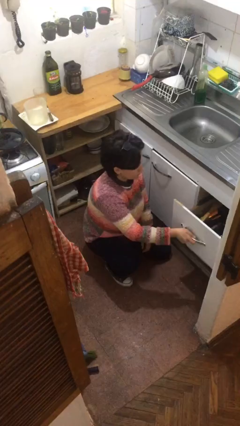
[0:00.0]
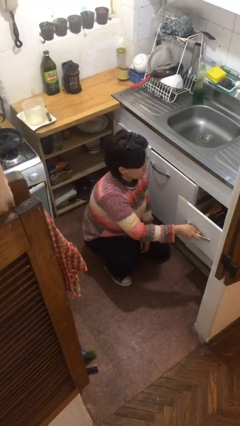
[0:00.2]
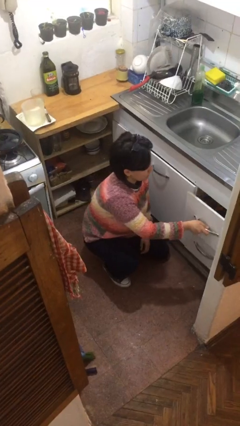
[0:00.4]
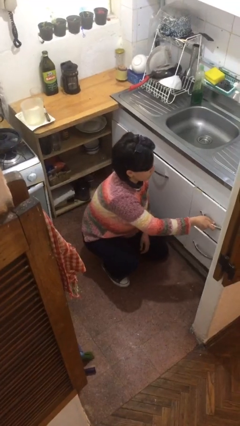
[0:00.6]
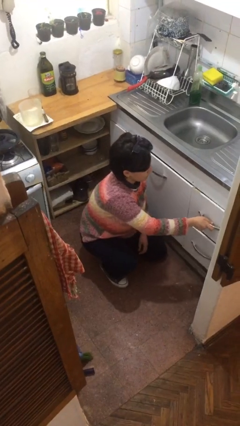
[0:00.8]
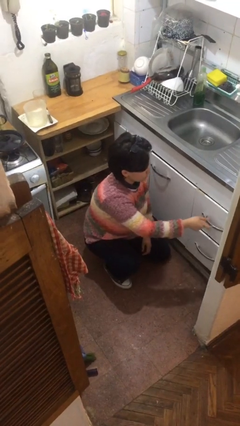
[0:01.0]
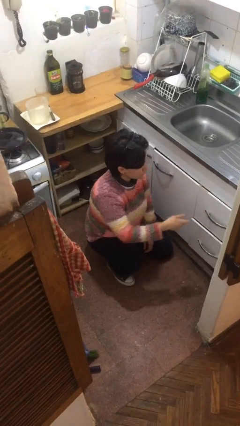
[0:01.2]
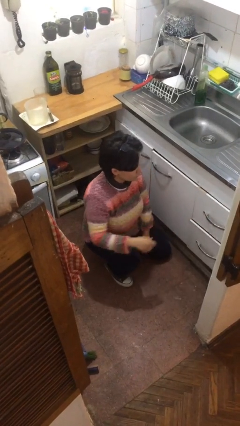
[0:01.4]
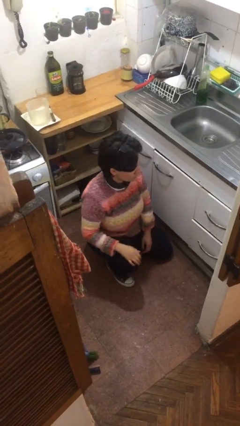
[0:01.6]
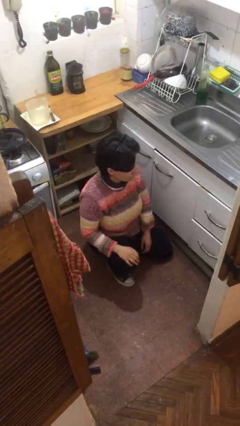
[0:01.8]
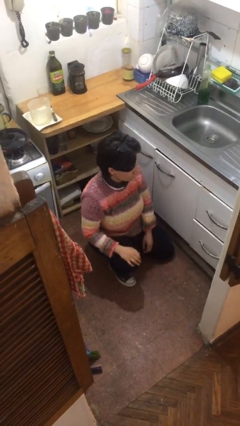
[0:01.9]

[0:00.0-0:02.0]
person closes kitchen drawer

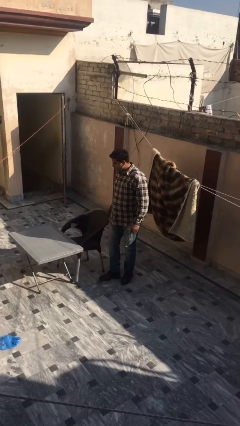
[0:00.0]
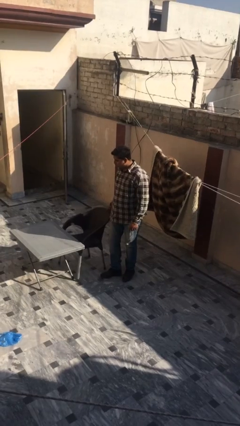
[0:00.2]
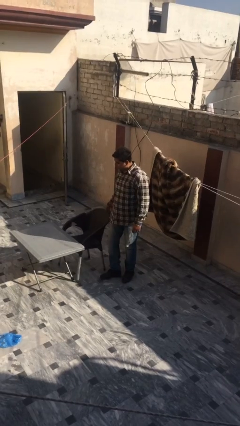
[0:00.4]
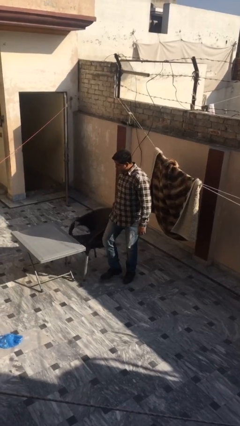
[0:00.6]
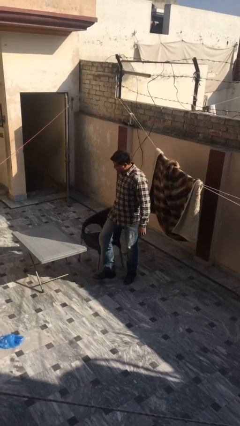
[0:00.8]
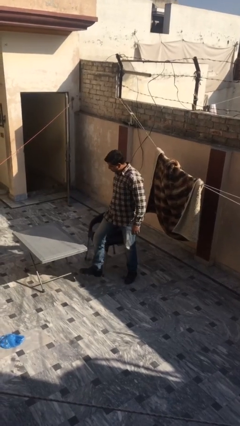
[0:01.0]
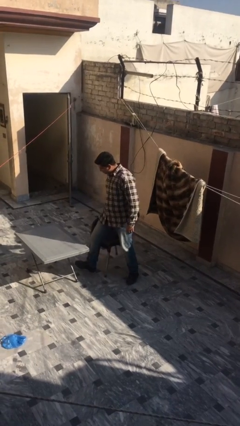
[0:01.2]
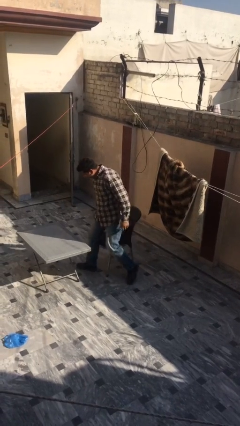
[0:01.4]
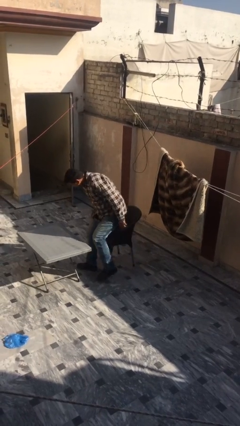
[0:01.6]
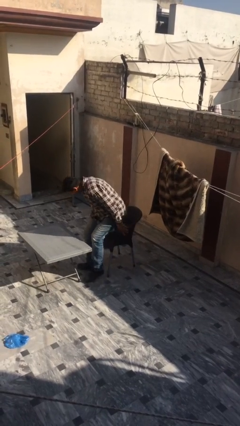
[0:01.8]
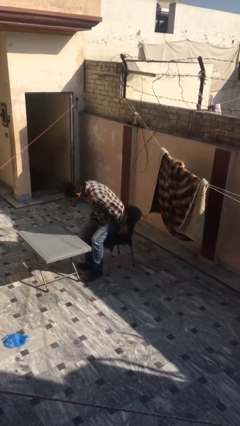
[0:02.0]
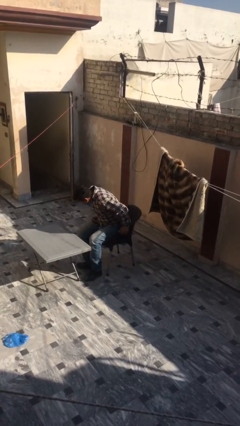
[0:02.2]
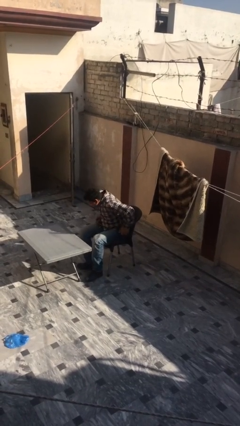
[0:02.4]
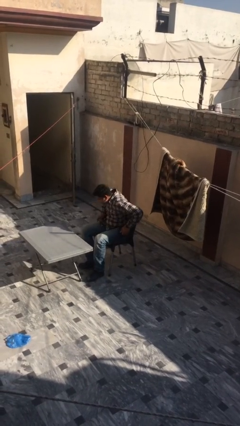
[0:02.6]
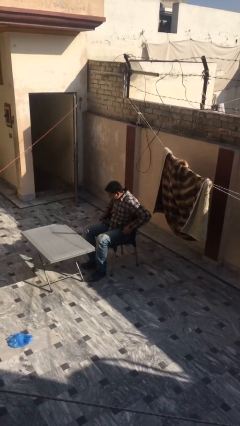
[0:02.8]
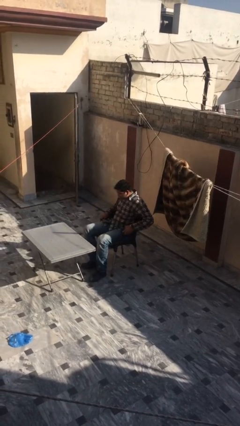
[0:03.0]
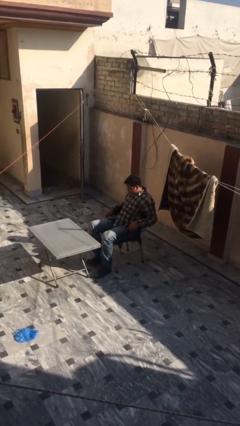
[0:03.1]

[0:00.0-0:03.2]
person sits down

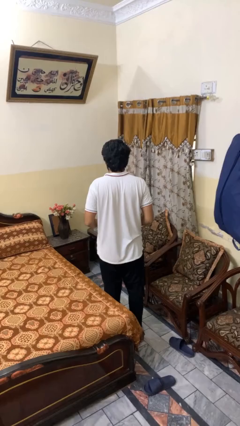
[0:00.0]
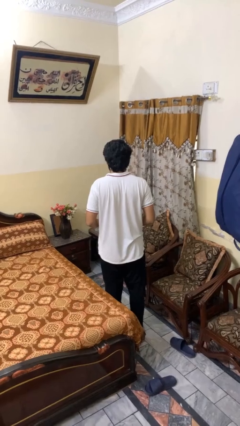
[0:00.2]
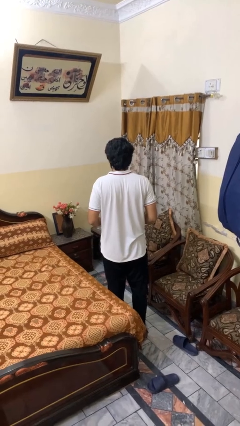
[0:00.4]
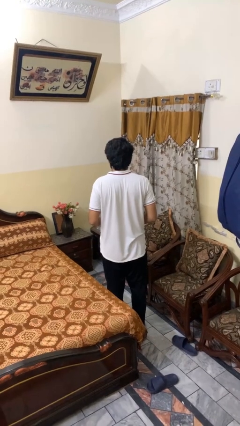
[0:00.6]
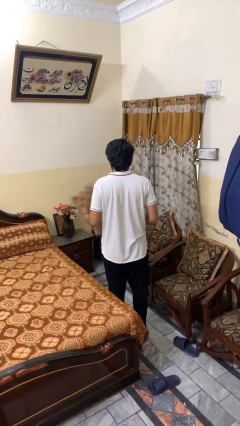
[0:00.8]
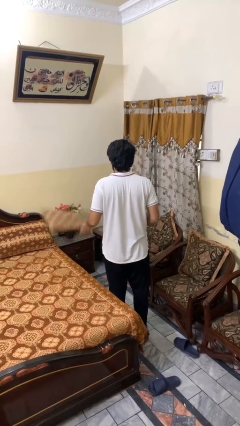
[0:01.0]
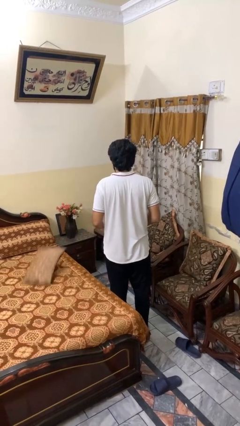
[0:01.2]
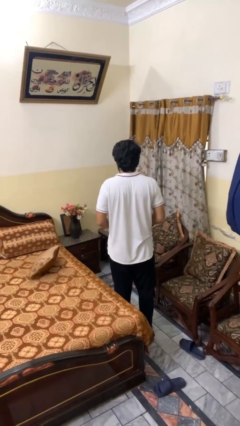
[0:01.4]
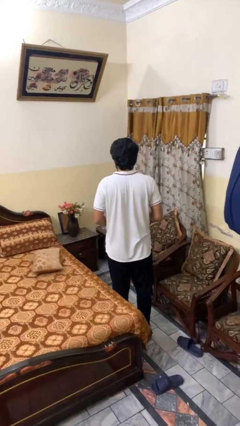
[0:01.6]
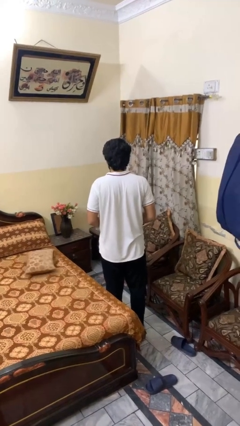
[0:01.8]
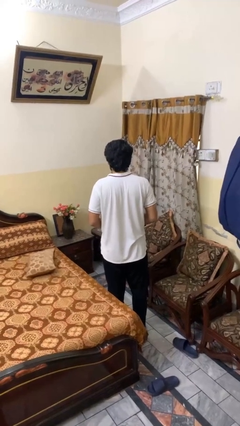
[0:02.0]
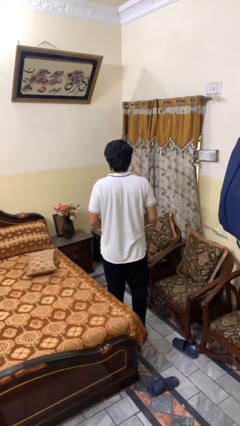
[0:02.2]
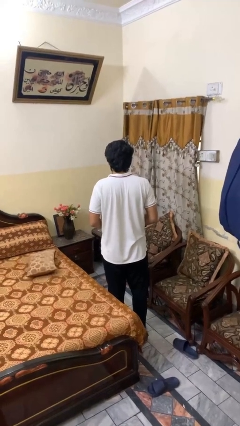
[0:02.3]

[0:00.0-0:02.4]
person throws object on bed

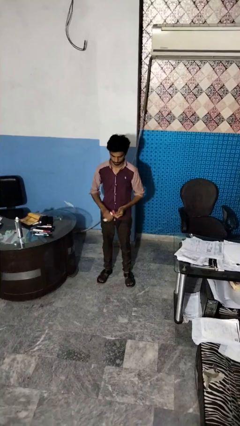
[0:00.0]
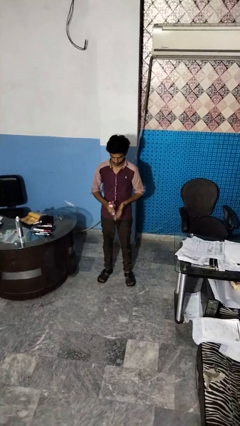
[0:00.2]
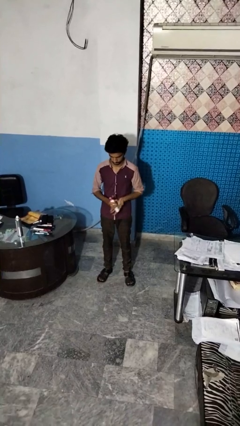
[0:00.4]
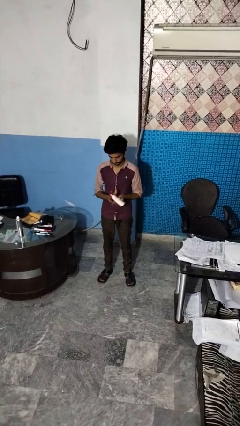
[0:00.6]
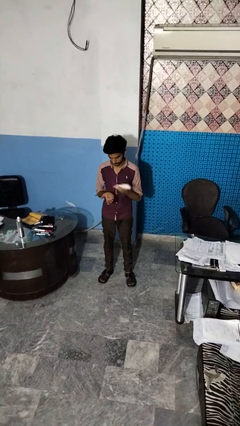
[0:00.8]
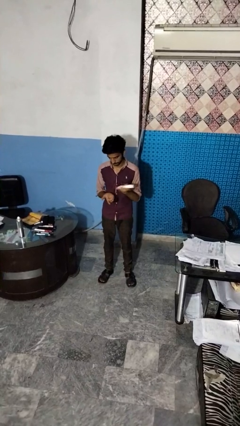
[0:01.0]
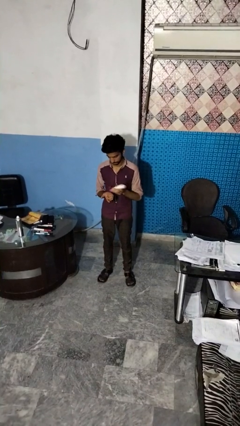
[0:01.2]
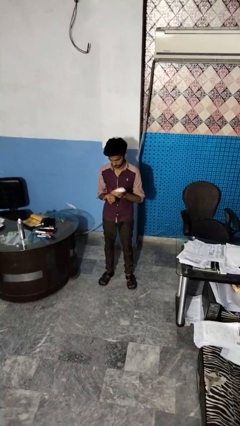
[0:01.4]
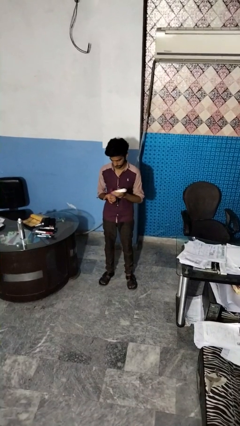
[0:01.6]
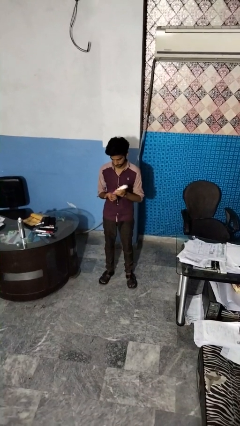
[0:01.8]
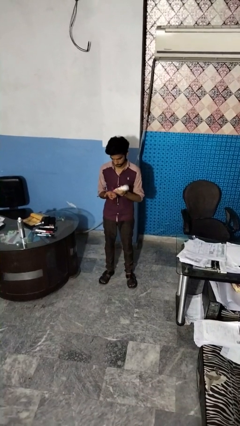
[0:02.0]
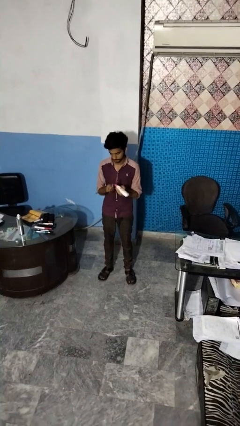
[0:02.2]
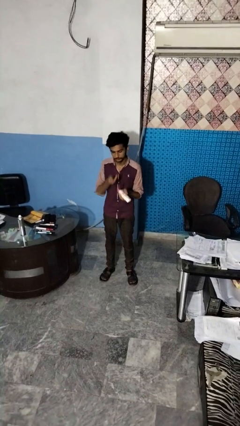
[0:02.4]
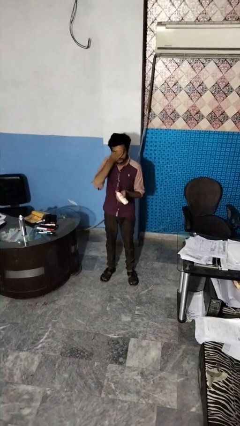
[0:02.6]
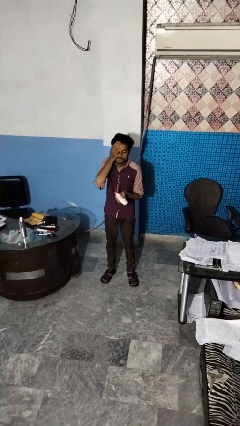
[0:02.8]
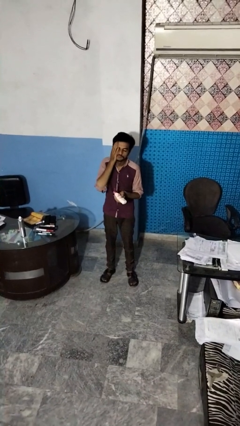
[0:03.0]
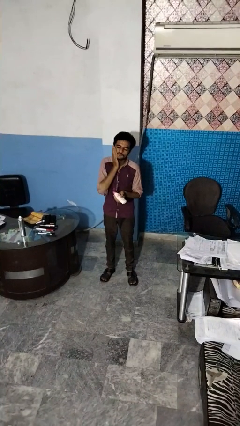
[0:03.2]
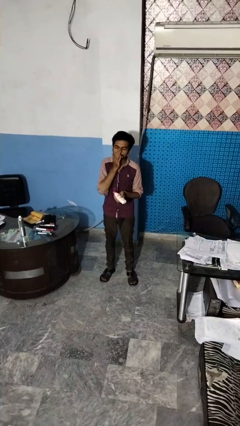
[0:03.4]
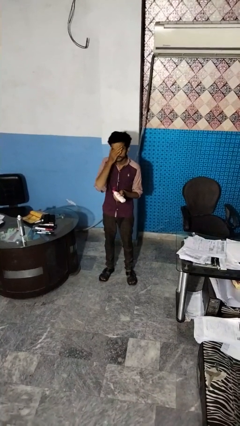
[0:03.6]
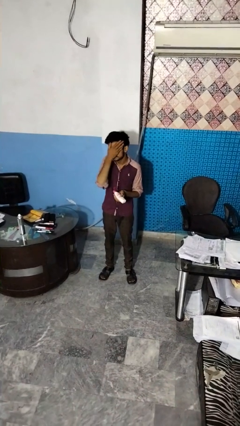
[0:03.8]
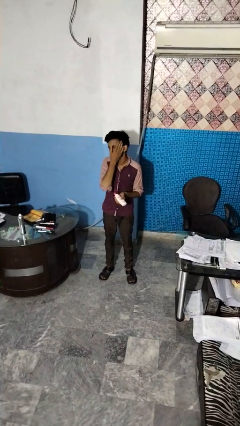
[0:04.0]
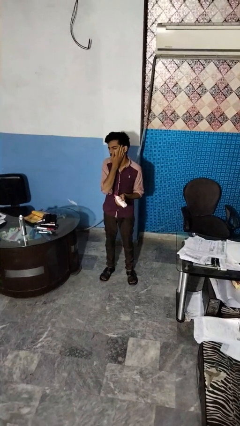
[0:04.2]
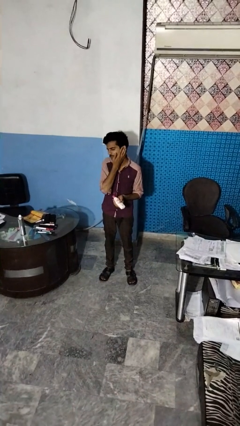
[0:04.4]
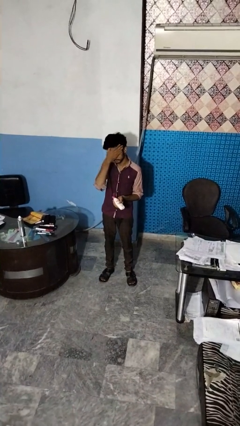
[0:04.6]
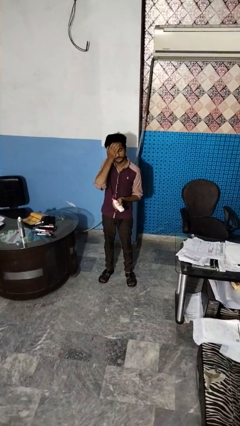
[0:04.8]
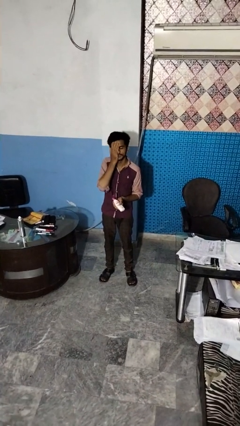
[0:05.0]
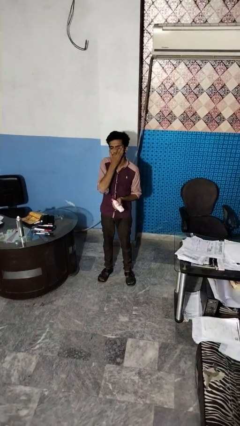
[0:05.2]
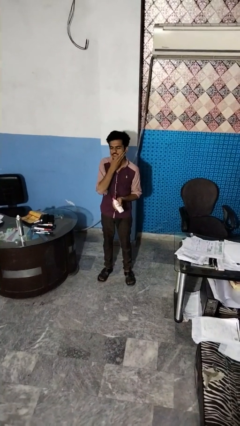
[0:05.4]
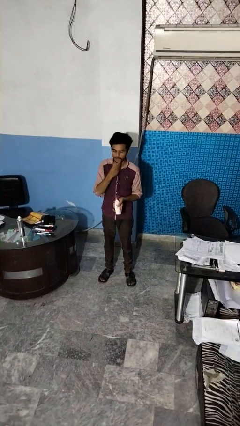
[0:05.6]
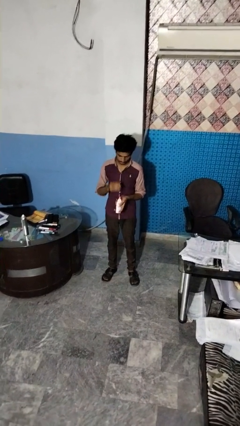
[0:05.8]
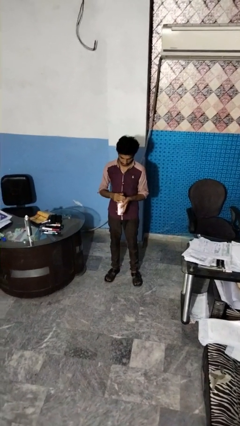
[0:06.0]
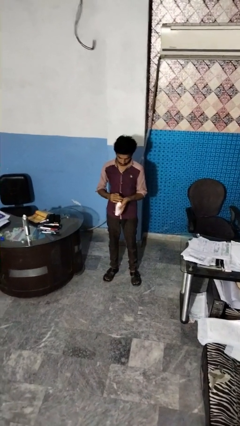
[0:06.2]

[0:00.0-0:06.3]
person applies facial moisturizer

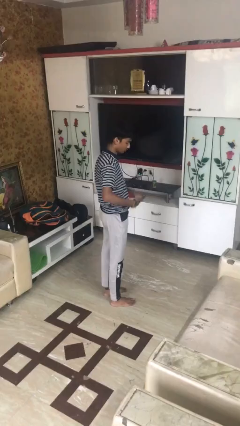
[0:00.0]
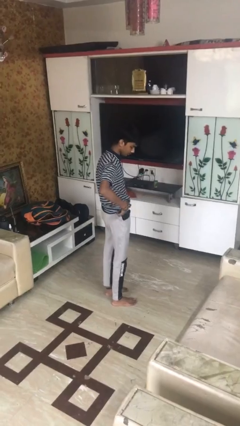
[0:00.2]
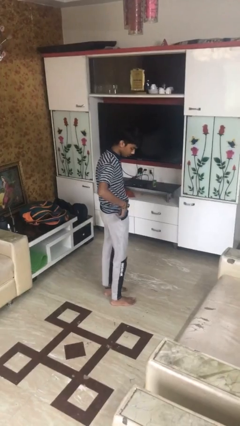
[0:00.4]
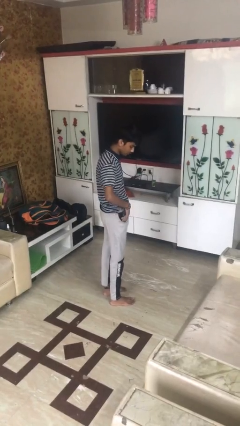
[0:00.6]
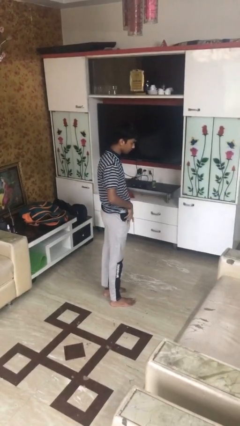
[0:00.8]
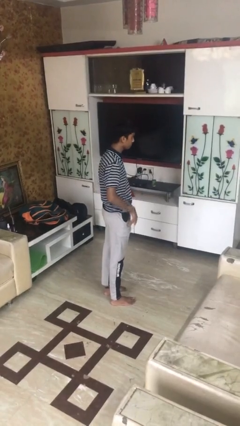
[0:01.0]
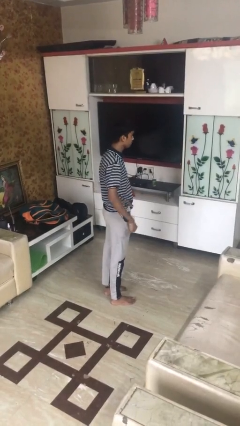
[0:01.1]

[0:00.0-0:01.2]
person puts phone into pocket

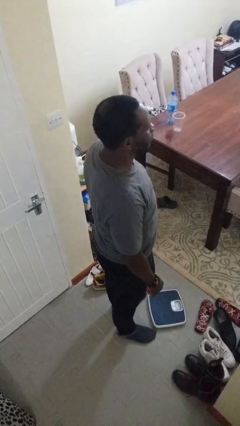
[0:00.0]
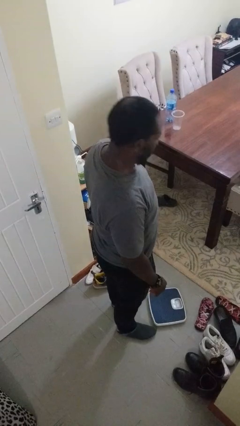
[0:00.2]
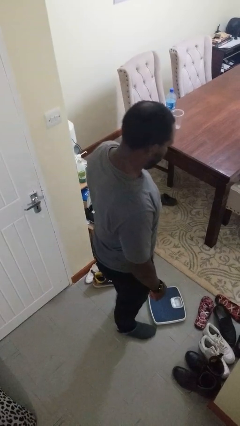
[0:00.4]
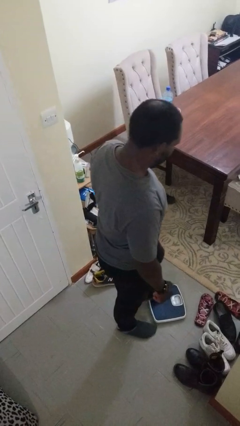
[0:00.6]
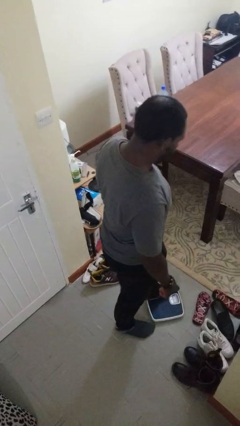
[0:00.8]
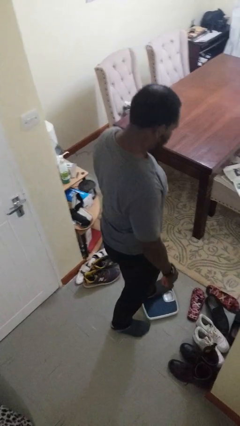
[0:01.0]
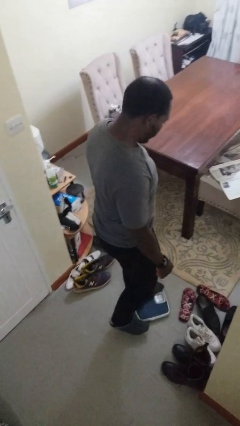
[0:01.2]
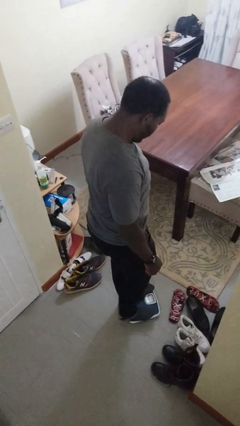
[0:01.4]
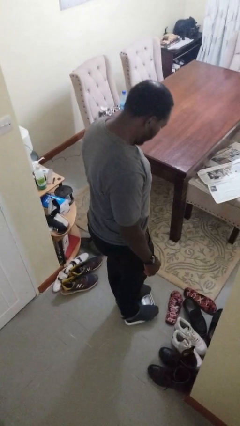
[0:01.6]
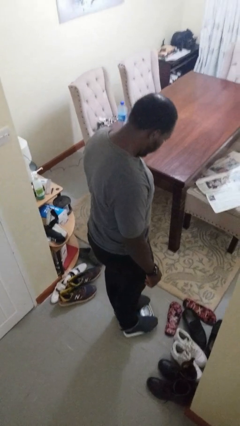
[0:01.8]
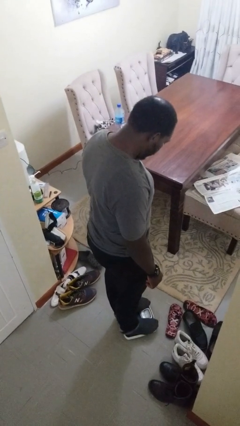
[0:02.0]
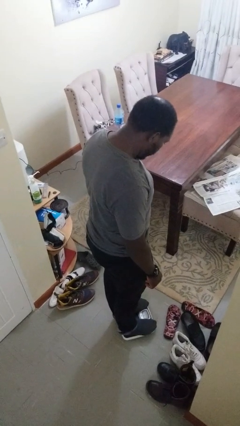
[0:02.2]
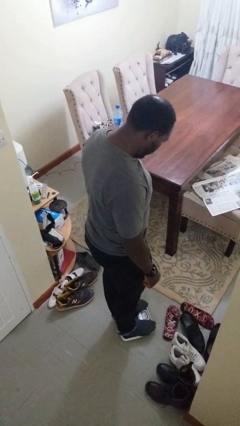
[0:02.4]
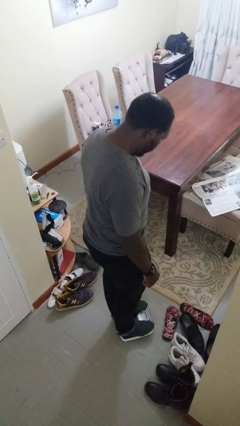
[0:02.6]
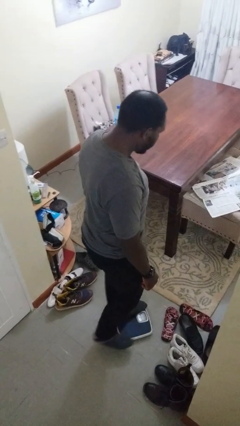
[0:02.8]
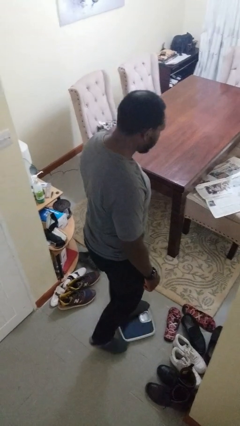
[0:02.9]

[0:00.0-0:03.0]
person uses bodyweight scale
